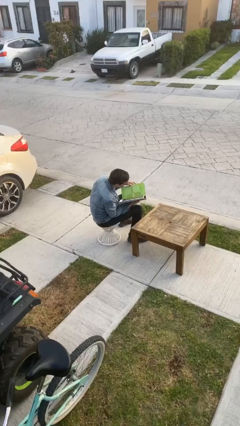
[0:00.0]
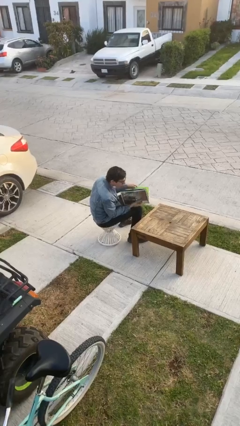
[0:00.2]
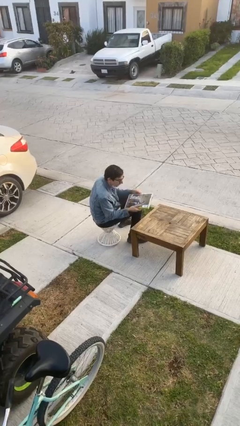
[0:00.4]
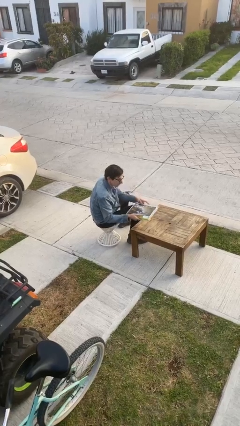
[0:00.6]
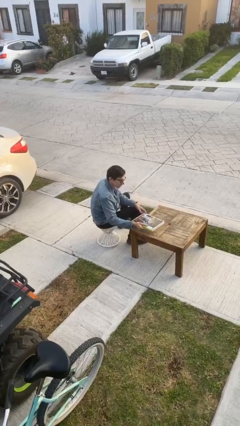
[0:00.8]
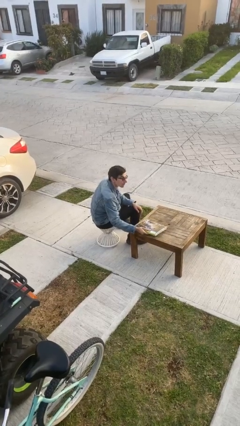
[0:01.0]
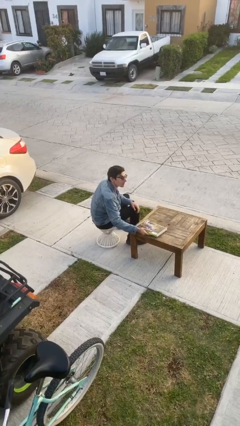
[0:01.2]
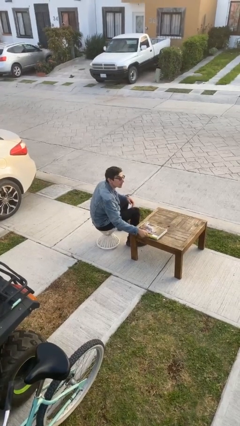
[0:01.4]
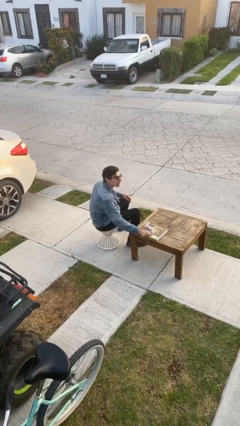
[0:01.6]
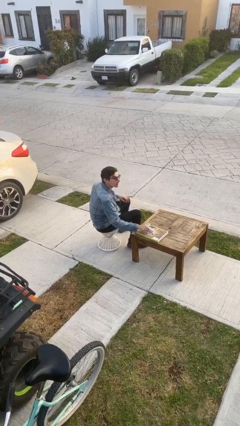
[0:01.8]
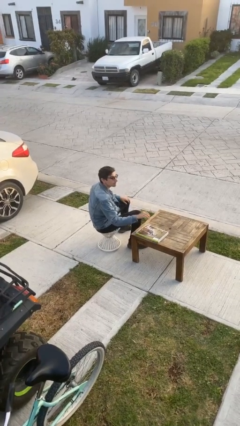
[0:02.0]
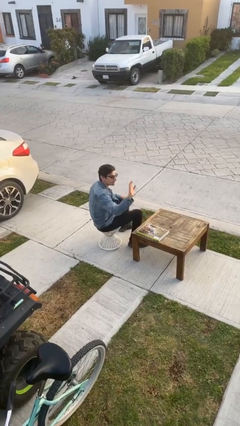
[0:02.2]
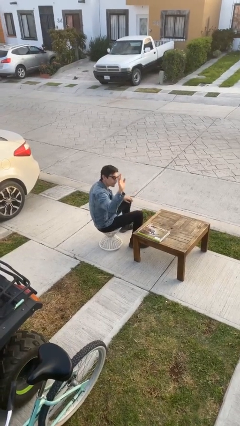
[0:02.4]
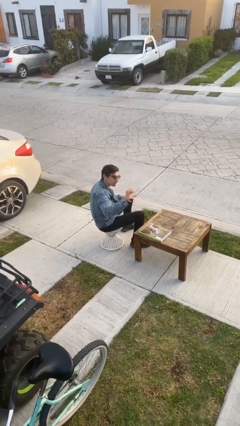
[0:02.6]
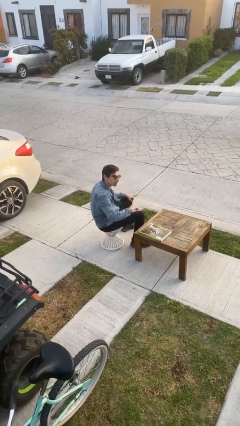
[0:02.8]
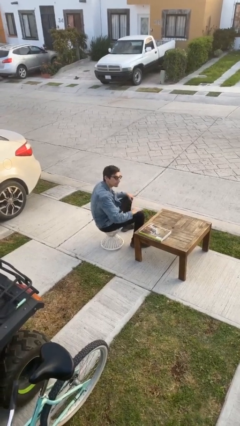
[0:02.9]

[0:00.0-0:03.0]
person puts down object on table

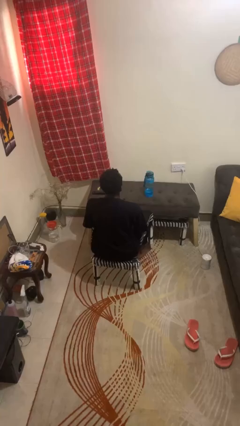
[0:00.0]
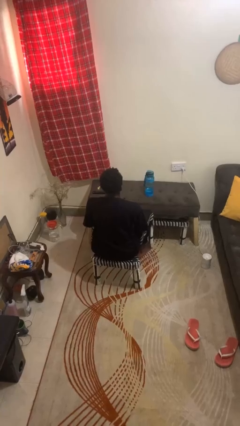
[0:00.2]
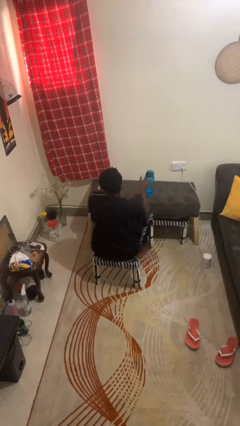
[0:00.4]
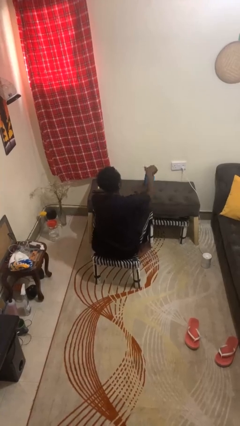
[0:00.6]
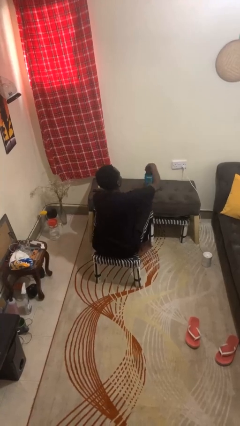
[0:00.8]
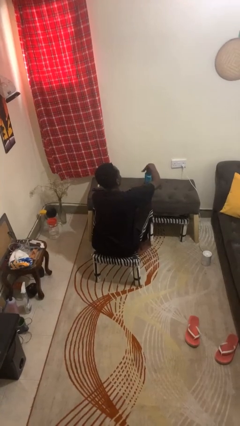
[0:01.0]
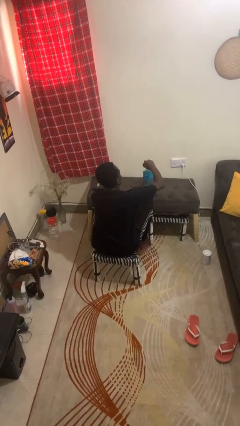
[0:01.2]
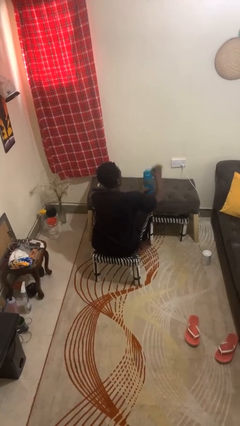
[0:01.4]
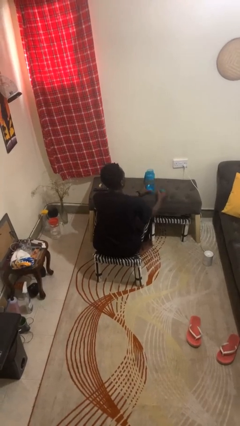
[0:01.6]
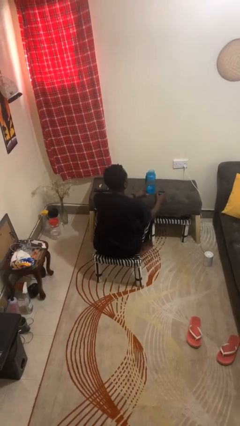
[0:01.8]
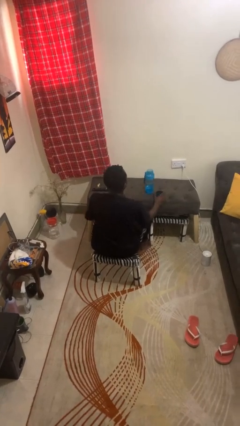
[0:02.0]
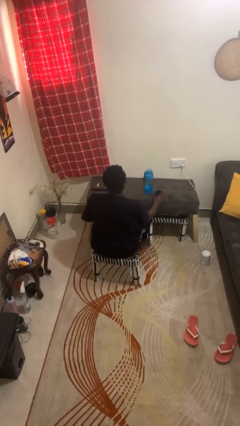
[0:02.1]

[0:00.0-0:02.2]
person opens jar

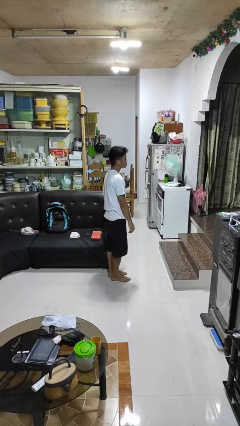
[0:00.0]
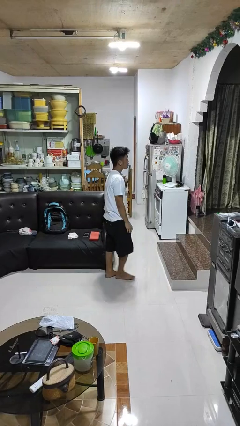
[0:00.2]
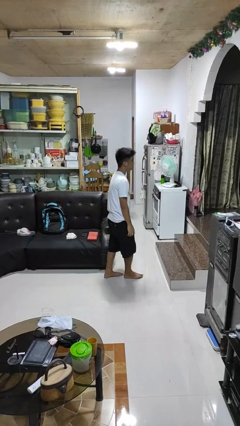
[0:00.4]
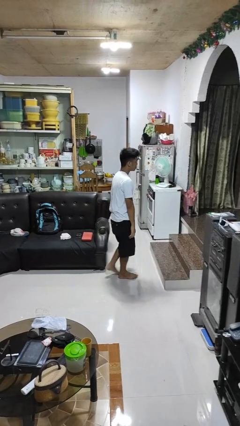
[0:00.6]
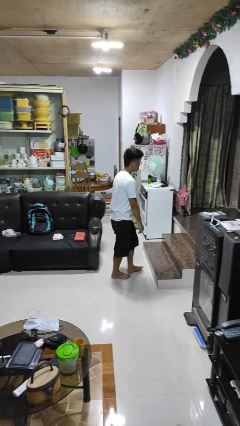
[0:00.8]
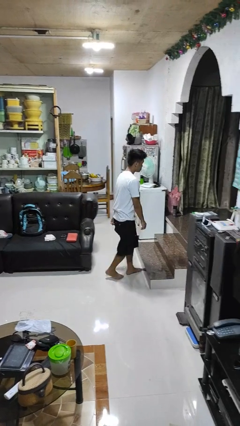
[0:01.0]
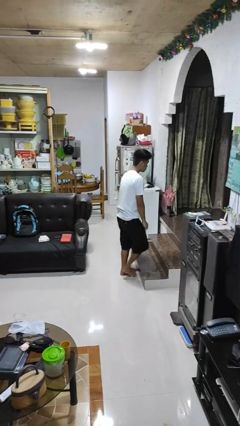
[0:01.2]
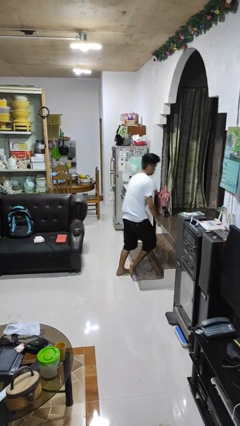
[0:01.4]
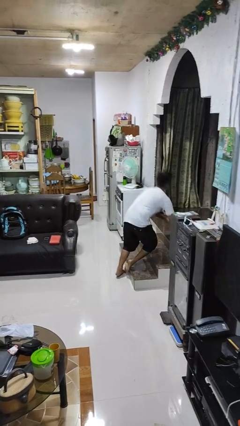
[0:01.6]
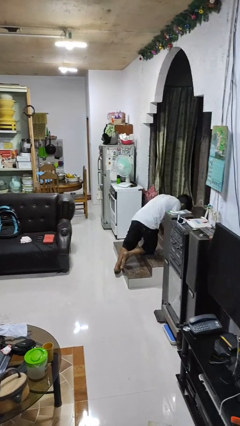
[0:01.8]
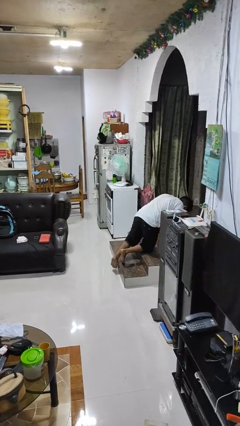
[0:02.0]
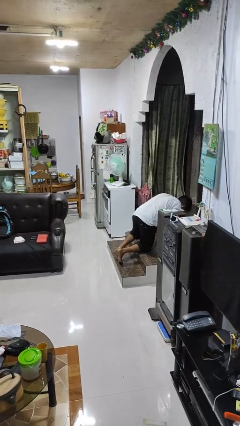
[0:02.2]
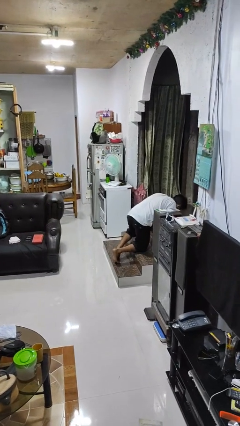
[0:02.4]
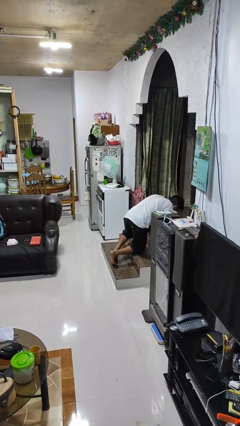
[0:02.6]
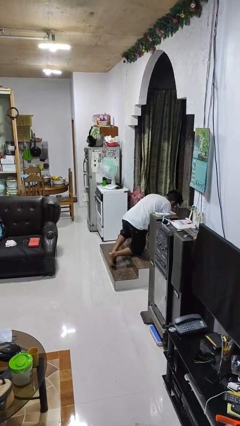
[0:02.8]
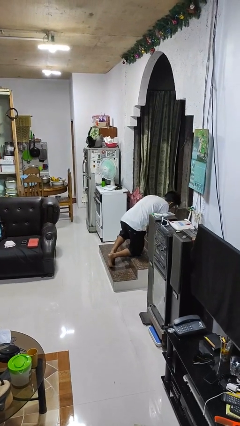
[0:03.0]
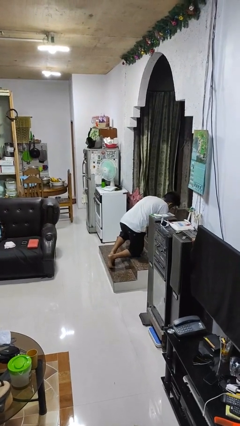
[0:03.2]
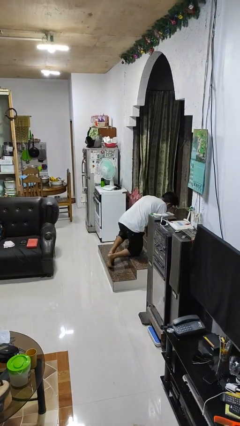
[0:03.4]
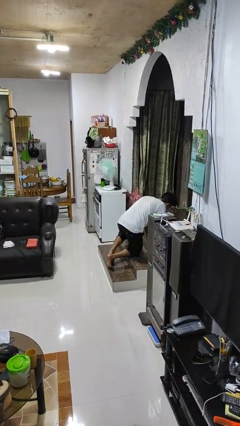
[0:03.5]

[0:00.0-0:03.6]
person trips on object on floor

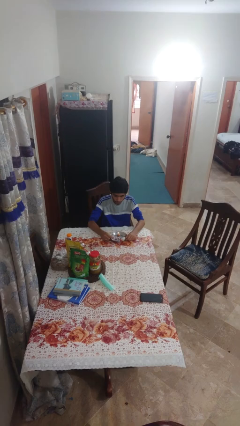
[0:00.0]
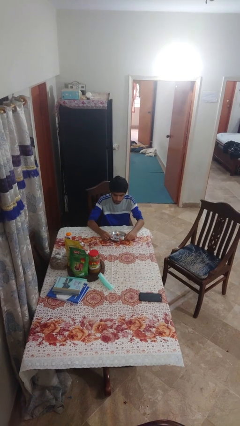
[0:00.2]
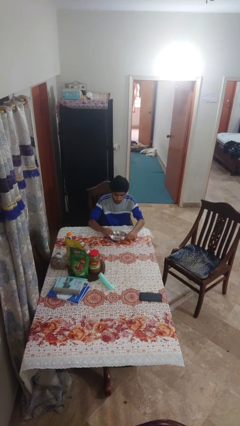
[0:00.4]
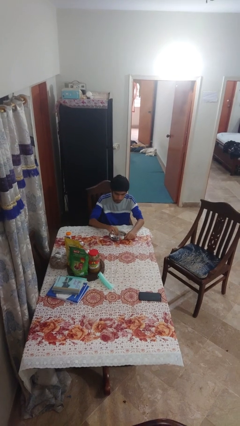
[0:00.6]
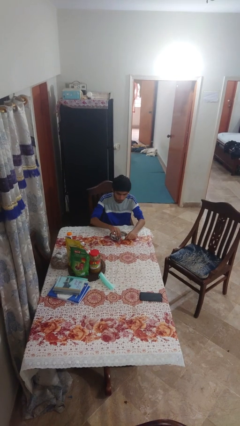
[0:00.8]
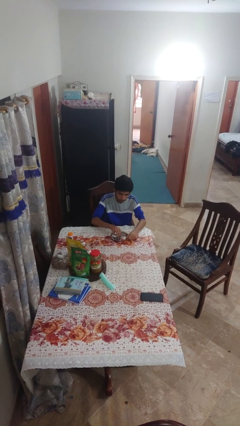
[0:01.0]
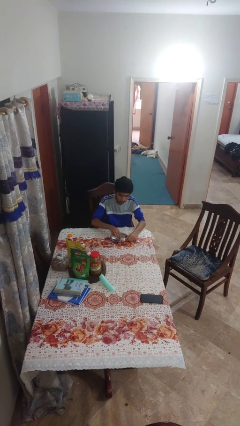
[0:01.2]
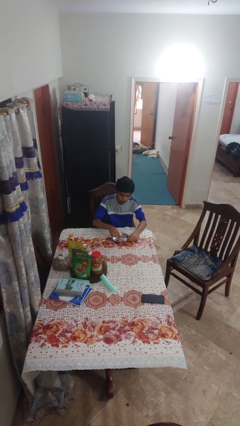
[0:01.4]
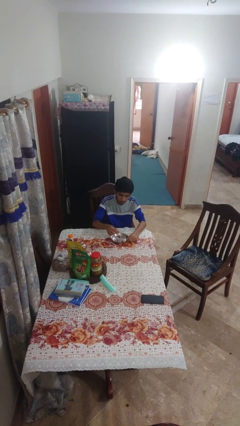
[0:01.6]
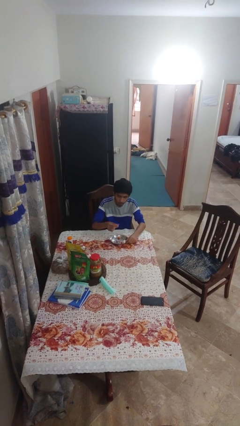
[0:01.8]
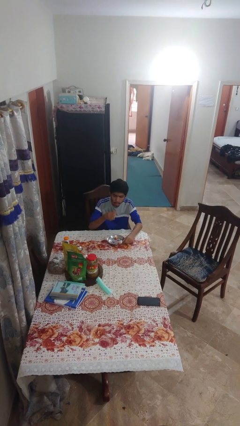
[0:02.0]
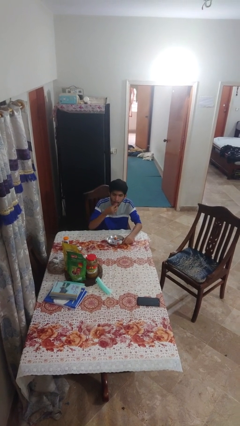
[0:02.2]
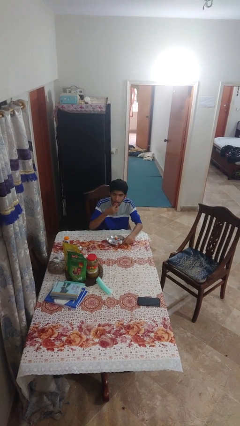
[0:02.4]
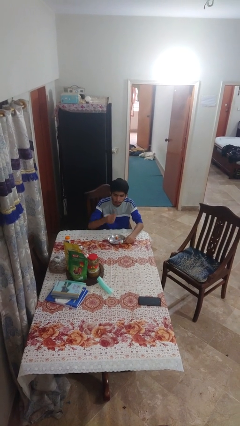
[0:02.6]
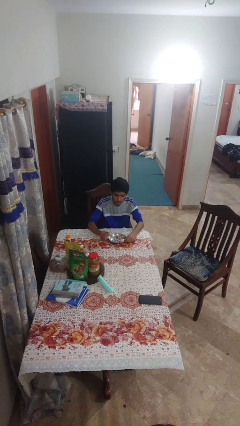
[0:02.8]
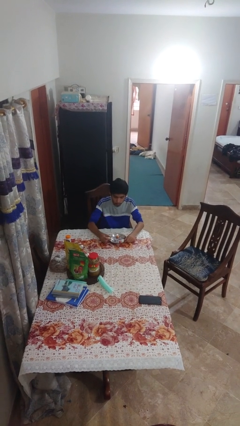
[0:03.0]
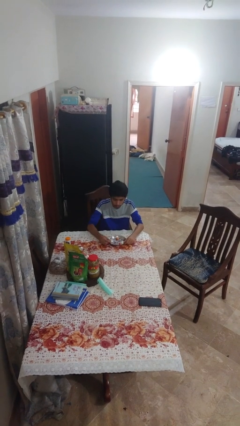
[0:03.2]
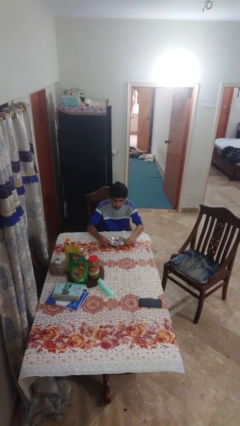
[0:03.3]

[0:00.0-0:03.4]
person eats with hands

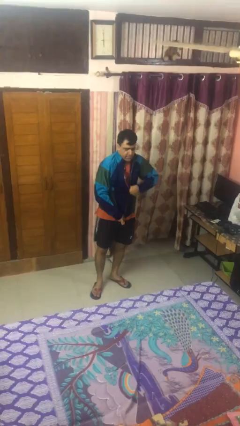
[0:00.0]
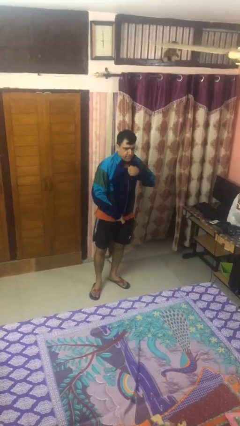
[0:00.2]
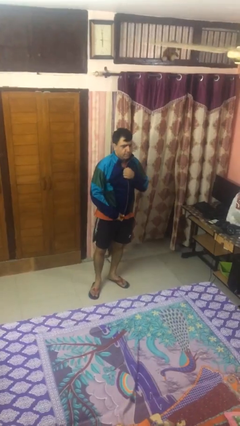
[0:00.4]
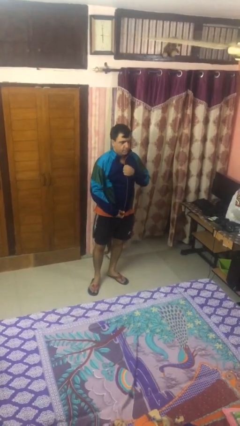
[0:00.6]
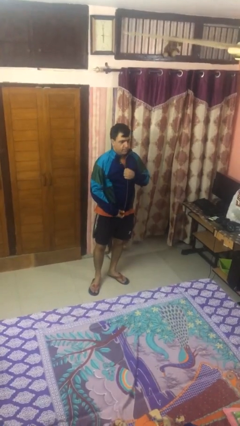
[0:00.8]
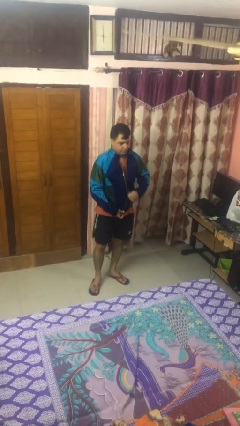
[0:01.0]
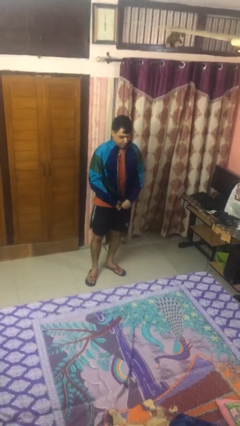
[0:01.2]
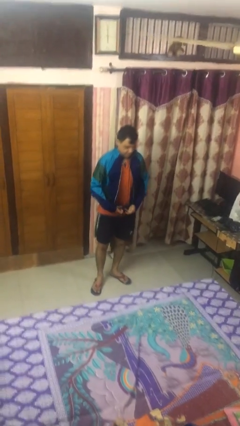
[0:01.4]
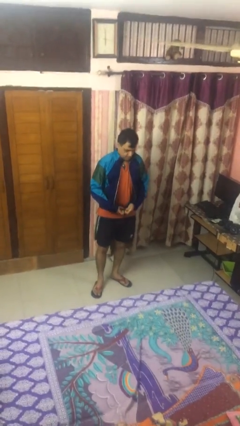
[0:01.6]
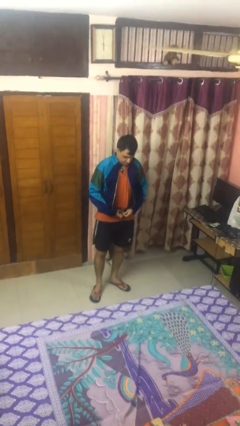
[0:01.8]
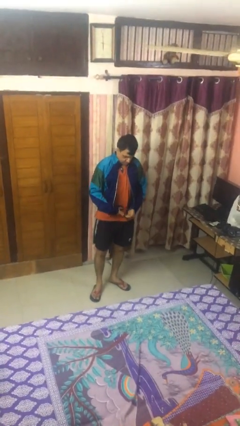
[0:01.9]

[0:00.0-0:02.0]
person unzips jacket

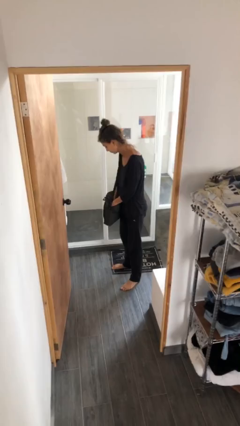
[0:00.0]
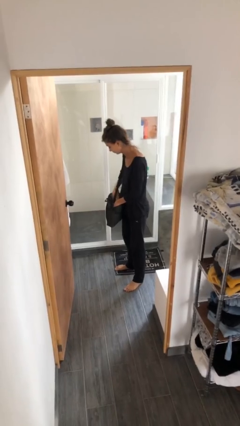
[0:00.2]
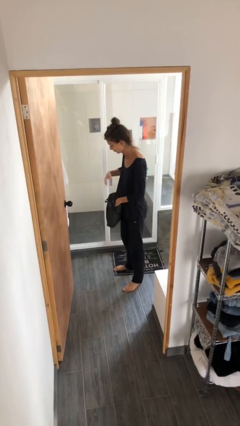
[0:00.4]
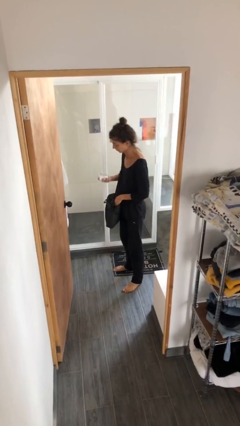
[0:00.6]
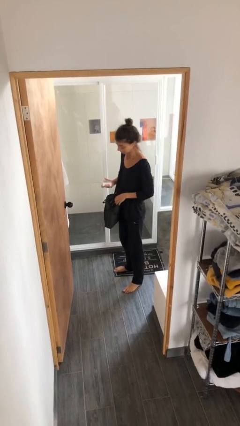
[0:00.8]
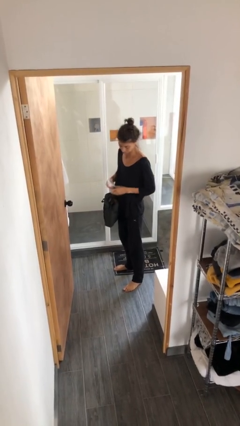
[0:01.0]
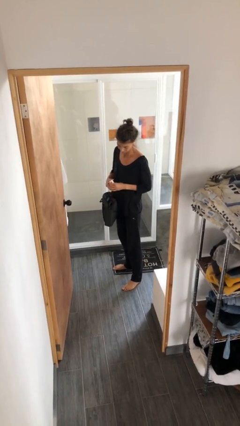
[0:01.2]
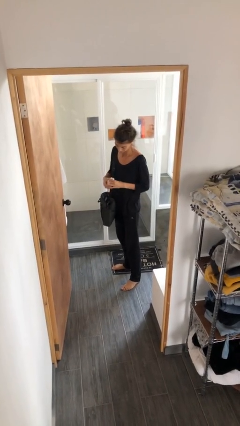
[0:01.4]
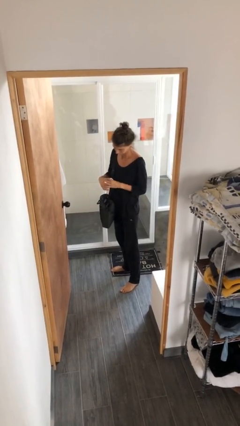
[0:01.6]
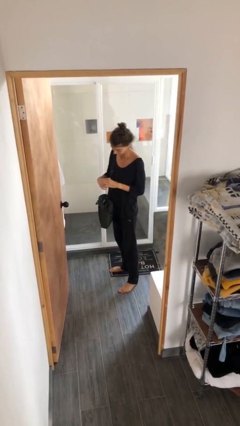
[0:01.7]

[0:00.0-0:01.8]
person takes object from purse

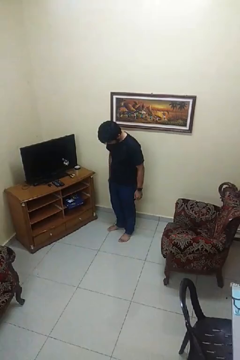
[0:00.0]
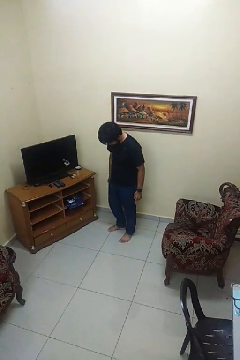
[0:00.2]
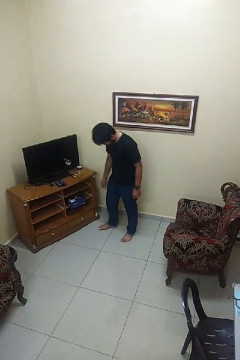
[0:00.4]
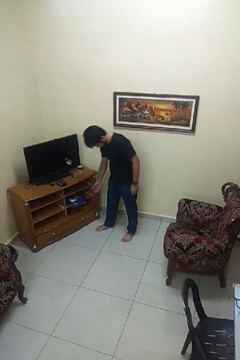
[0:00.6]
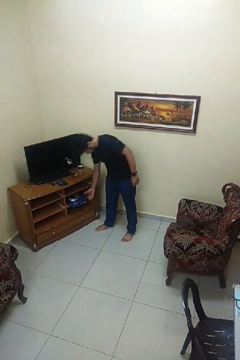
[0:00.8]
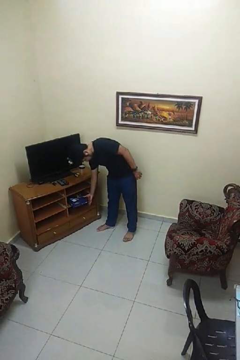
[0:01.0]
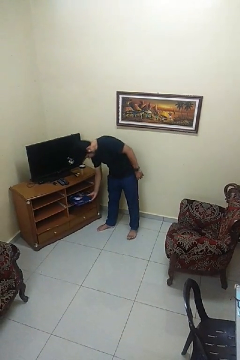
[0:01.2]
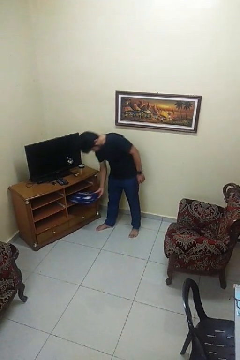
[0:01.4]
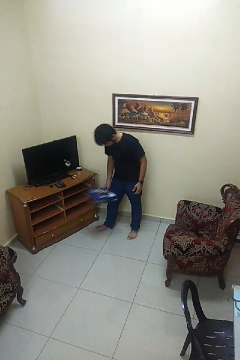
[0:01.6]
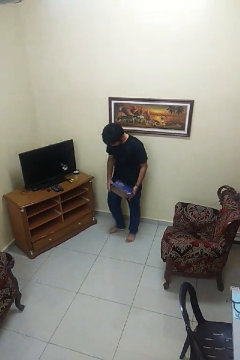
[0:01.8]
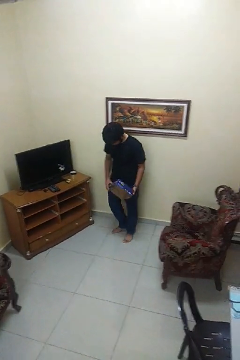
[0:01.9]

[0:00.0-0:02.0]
person picks up object from cabinet
